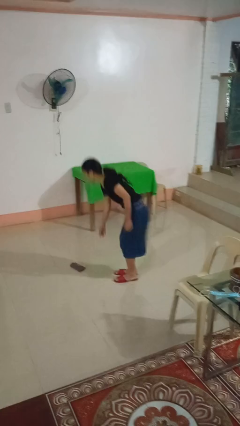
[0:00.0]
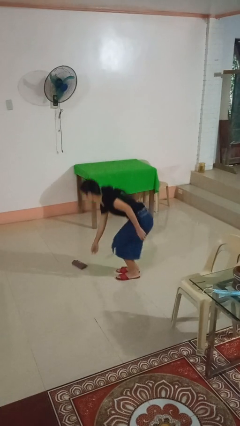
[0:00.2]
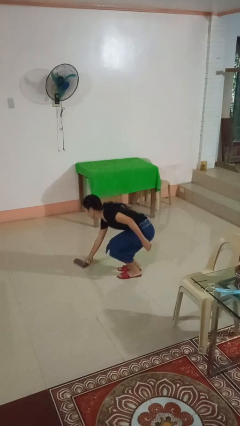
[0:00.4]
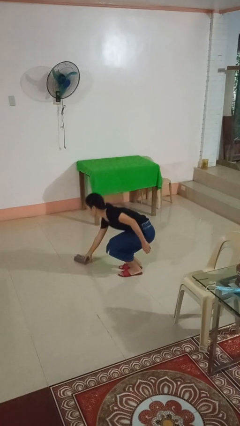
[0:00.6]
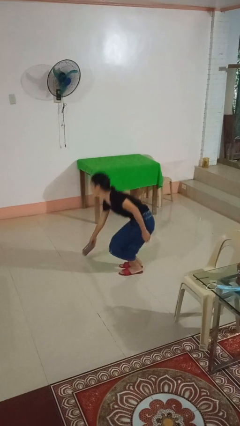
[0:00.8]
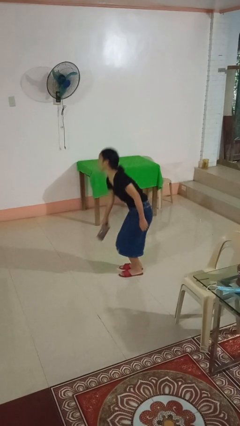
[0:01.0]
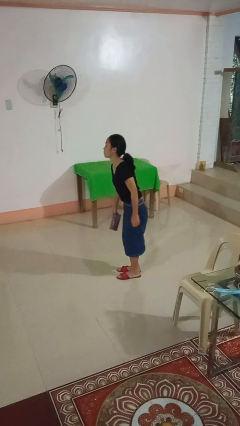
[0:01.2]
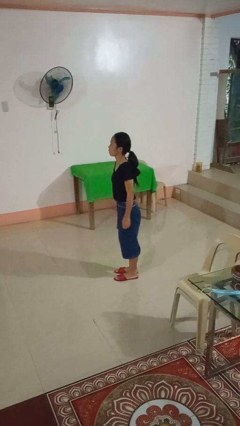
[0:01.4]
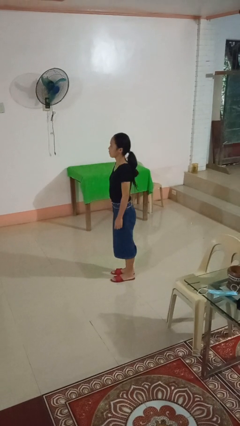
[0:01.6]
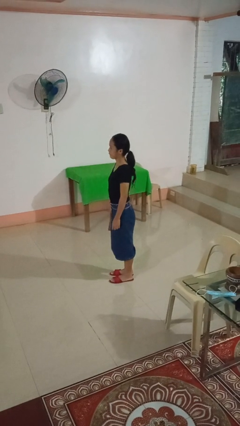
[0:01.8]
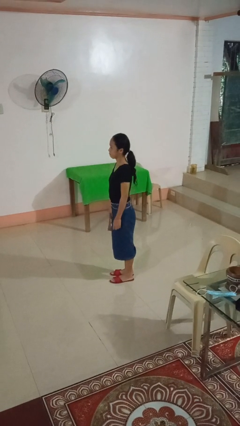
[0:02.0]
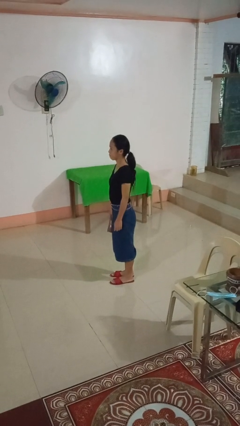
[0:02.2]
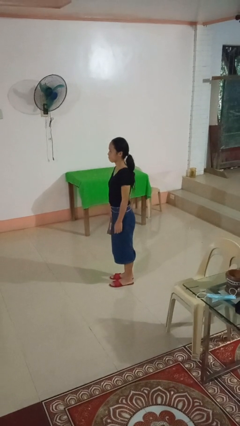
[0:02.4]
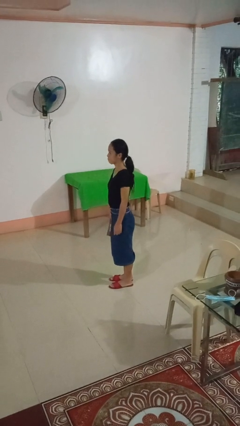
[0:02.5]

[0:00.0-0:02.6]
person picks up object from floor

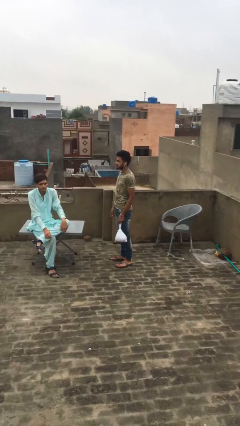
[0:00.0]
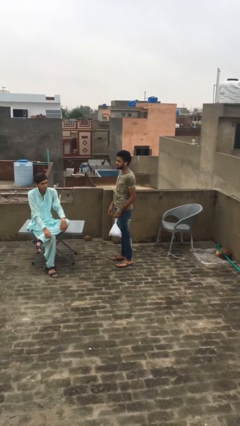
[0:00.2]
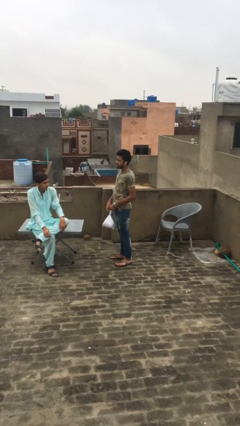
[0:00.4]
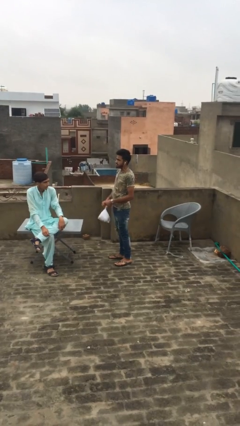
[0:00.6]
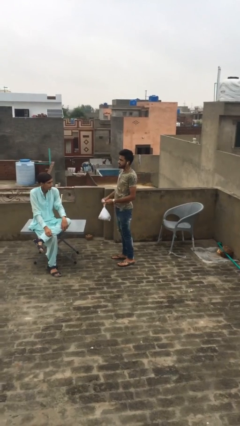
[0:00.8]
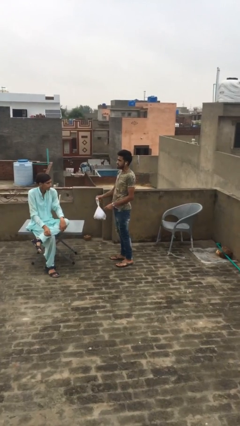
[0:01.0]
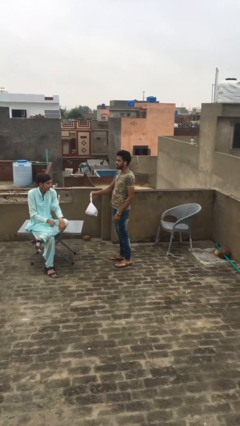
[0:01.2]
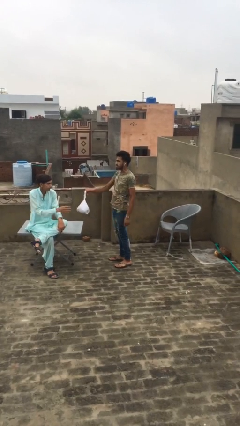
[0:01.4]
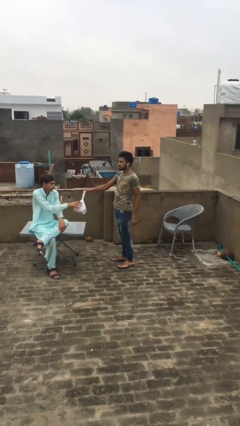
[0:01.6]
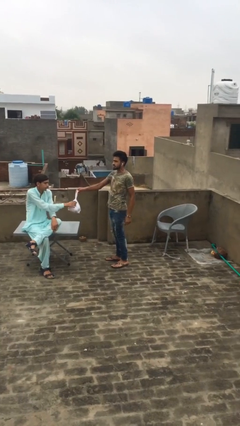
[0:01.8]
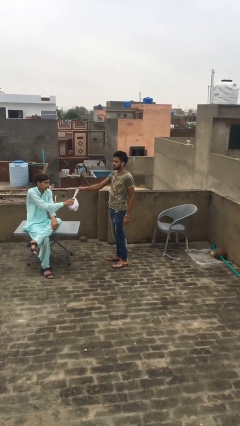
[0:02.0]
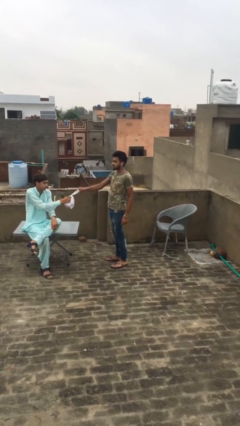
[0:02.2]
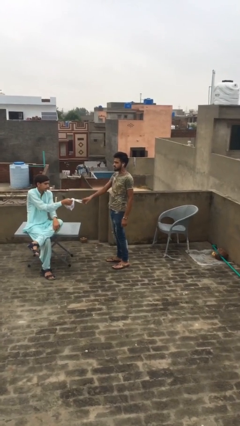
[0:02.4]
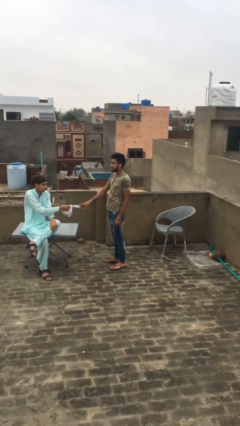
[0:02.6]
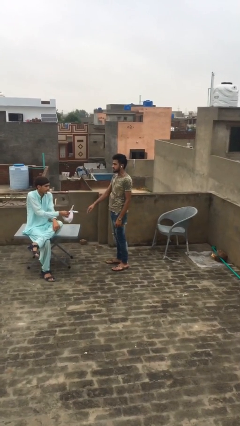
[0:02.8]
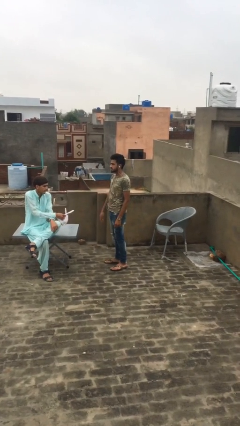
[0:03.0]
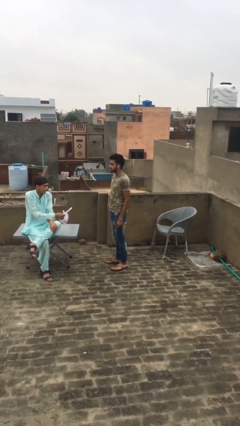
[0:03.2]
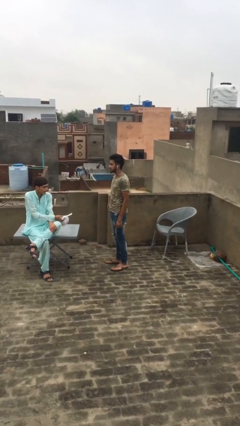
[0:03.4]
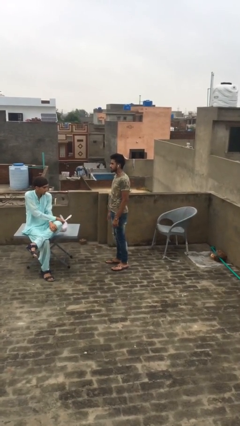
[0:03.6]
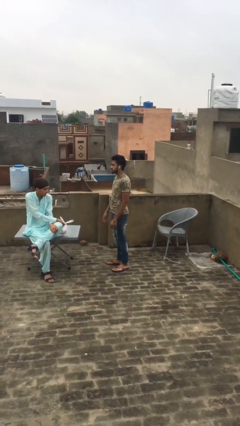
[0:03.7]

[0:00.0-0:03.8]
person transfers object to person

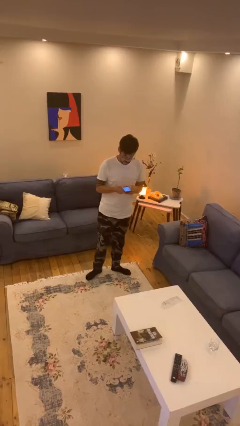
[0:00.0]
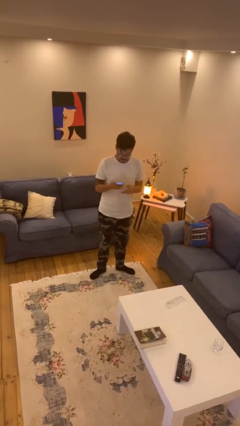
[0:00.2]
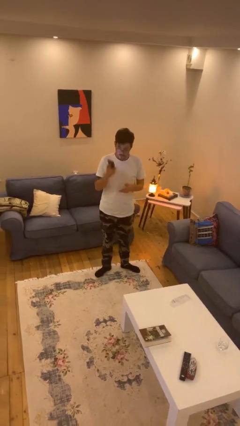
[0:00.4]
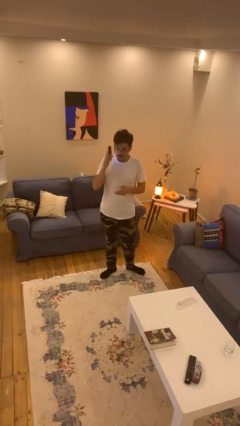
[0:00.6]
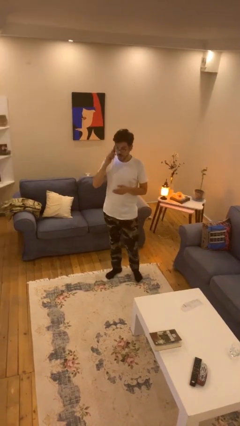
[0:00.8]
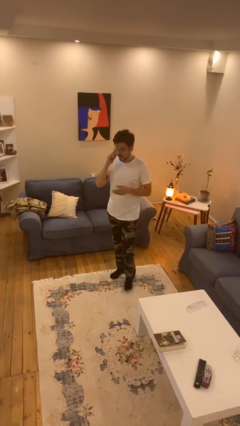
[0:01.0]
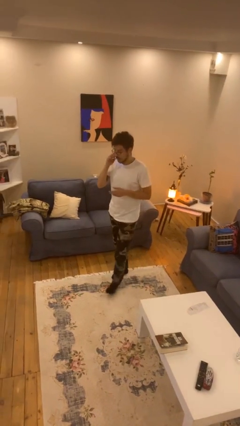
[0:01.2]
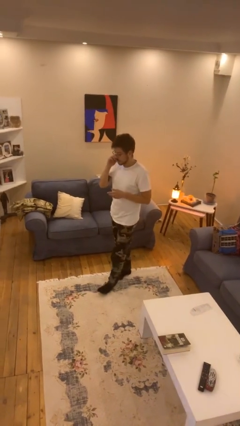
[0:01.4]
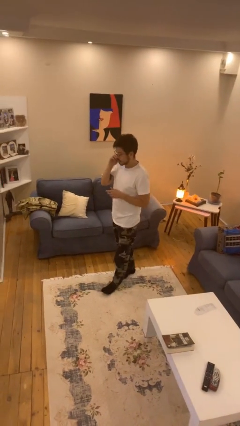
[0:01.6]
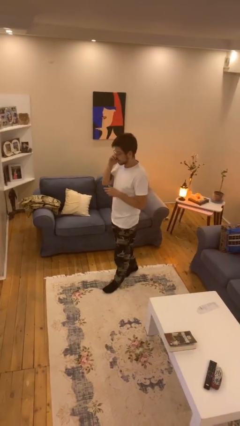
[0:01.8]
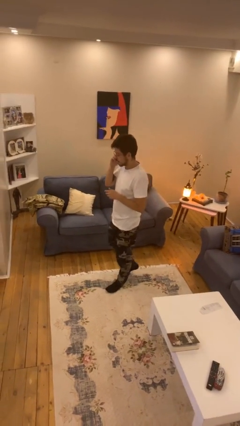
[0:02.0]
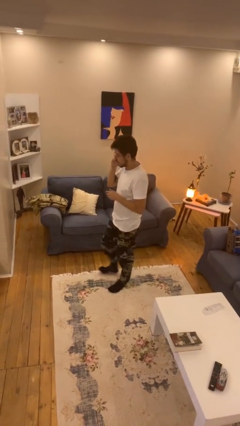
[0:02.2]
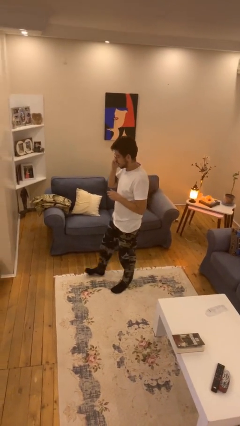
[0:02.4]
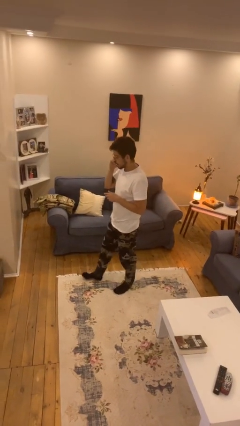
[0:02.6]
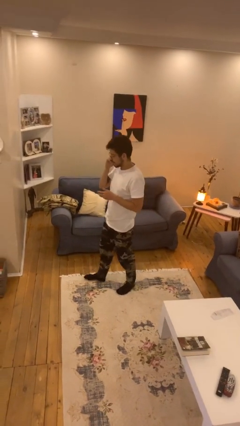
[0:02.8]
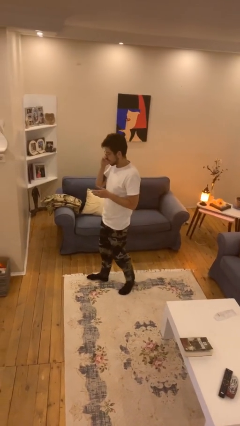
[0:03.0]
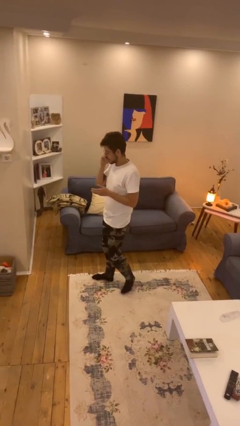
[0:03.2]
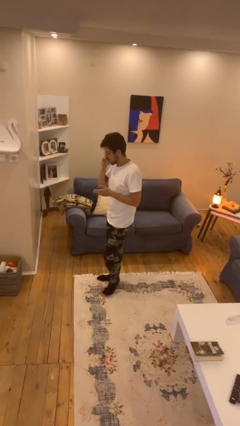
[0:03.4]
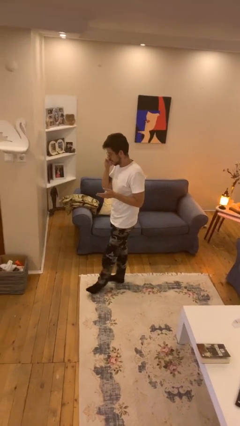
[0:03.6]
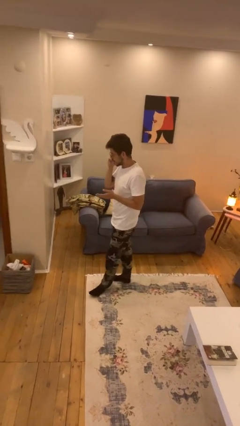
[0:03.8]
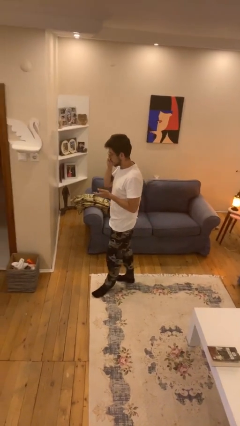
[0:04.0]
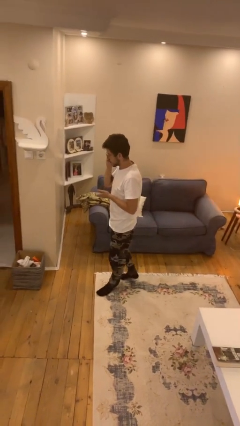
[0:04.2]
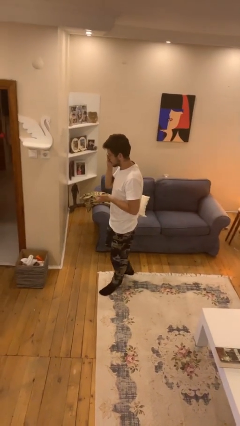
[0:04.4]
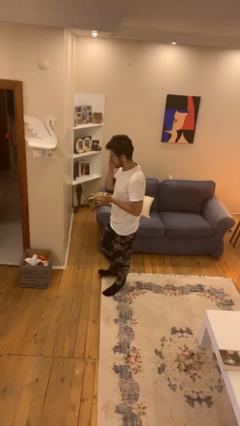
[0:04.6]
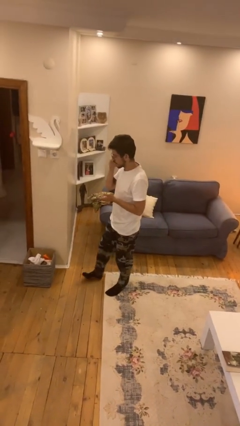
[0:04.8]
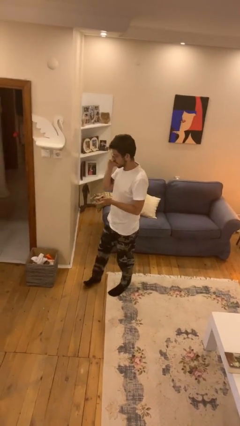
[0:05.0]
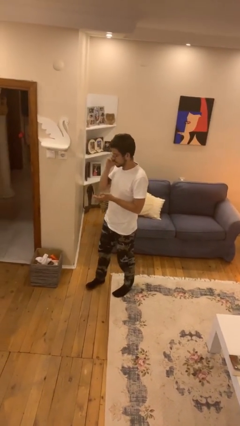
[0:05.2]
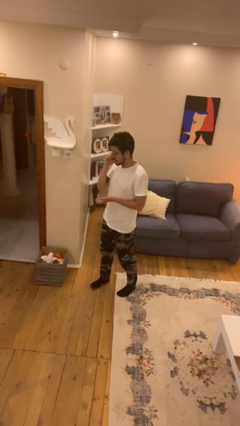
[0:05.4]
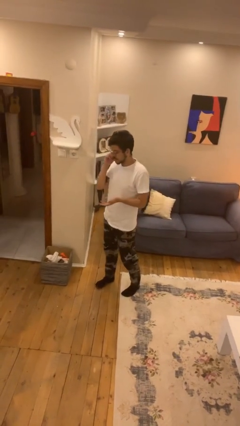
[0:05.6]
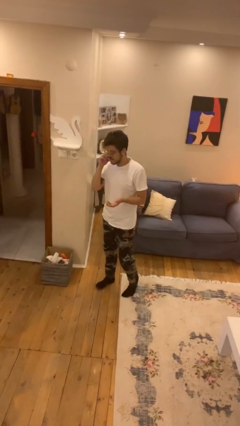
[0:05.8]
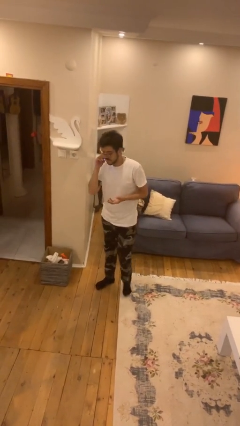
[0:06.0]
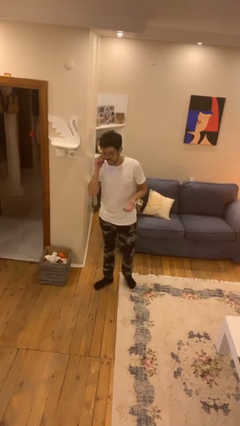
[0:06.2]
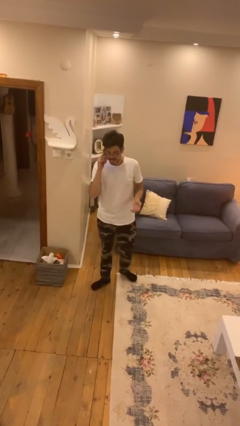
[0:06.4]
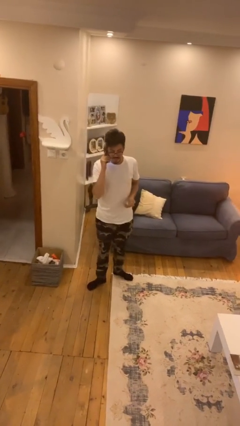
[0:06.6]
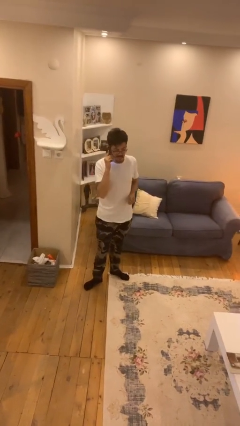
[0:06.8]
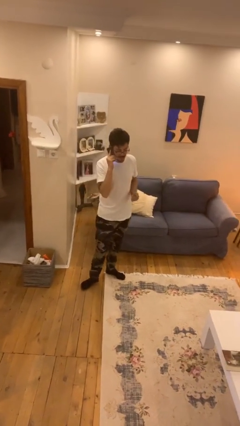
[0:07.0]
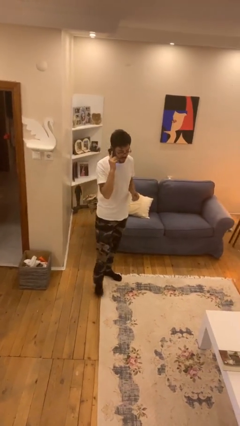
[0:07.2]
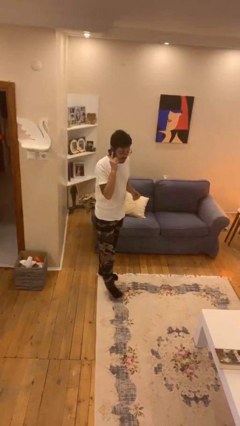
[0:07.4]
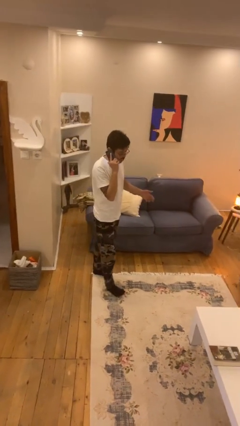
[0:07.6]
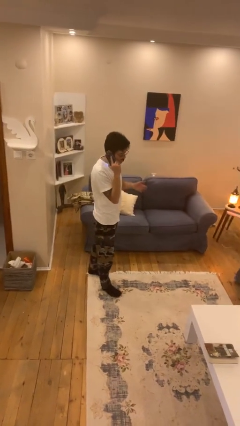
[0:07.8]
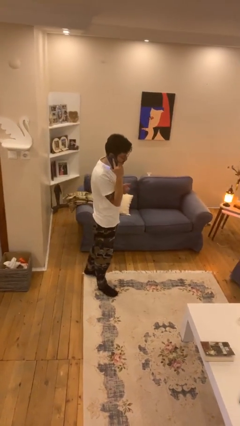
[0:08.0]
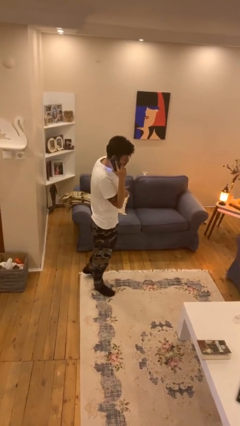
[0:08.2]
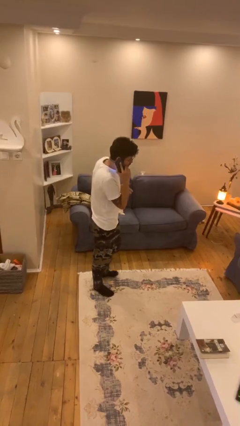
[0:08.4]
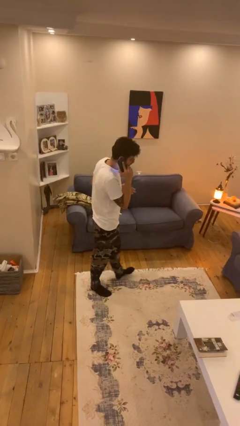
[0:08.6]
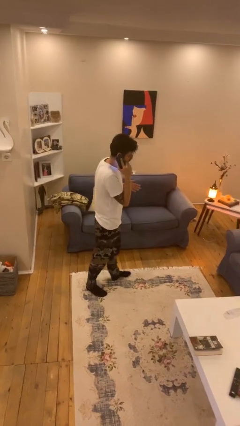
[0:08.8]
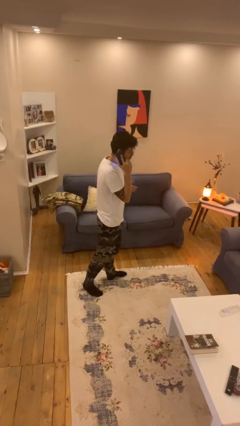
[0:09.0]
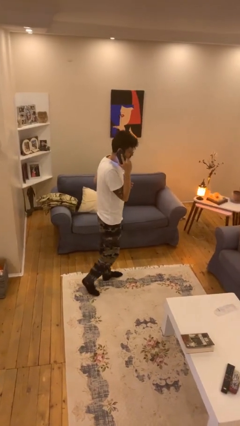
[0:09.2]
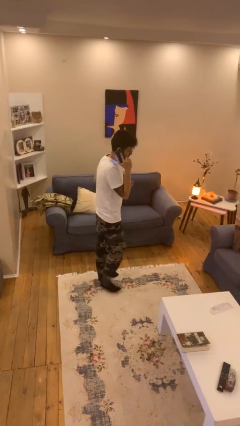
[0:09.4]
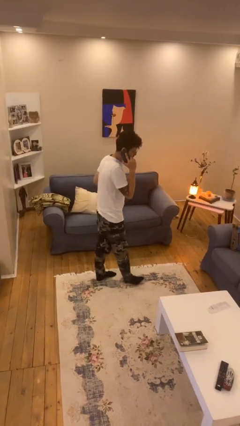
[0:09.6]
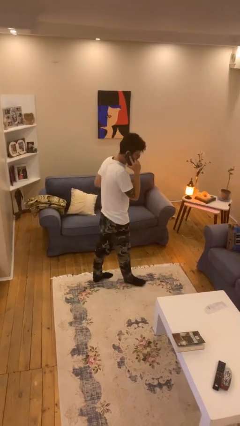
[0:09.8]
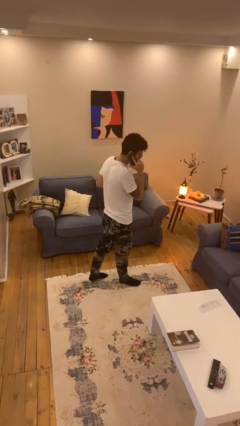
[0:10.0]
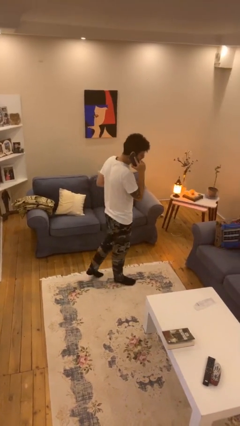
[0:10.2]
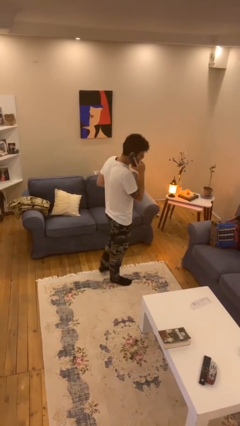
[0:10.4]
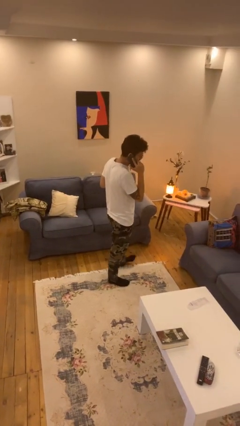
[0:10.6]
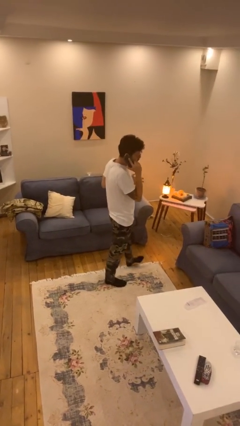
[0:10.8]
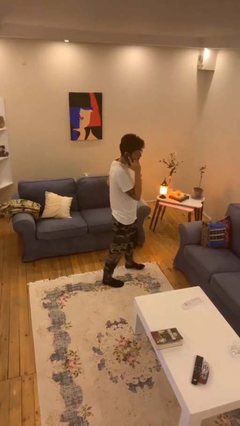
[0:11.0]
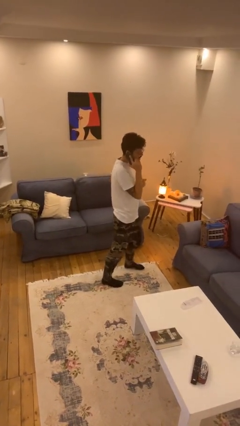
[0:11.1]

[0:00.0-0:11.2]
person talks on phone

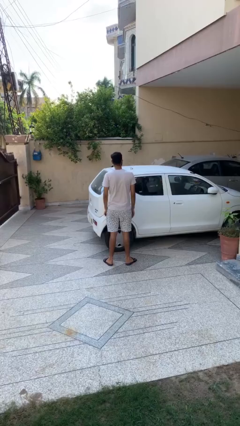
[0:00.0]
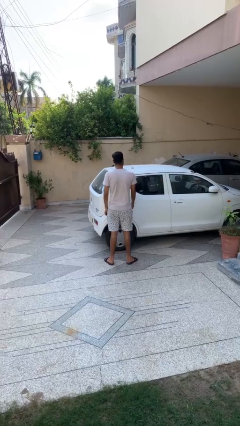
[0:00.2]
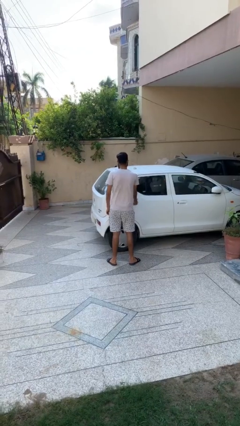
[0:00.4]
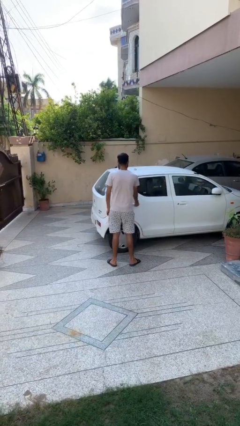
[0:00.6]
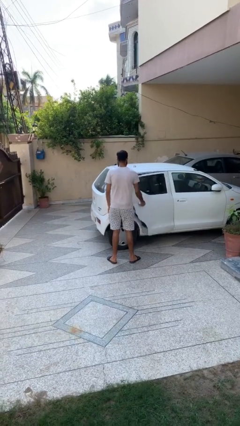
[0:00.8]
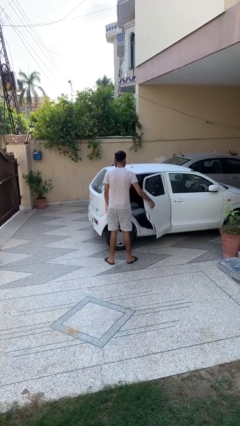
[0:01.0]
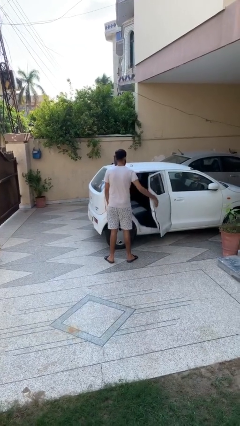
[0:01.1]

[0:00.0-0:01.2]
person opens car door
